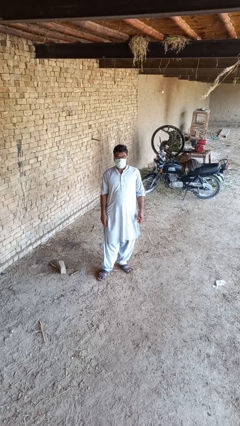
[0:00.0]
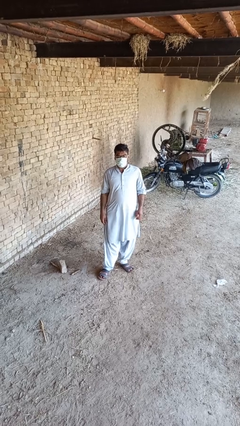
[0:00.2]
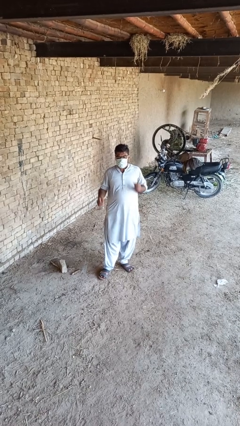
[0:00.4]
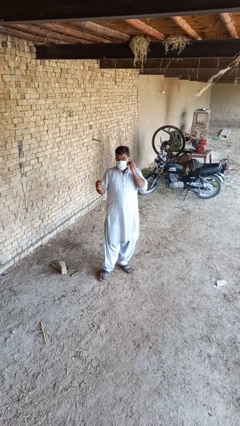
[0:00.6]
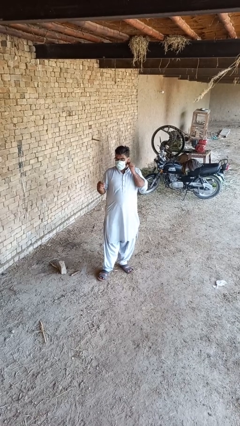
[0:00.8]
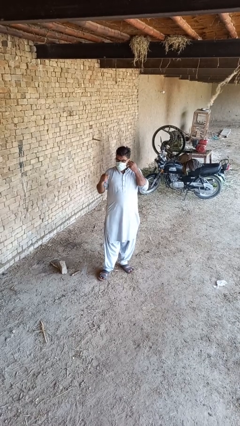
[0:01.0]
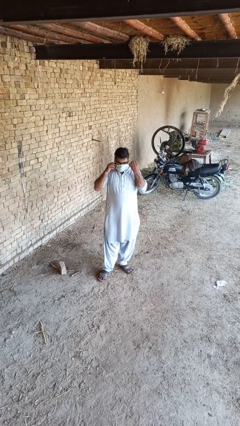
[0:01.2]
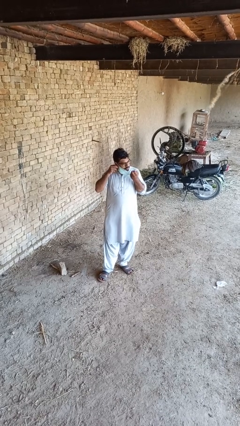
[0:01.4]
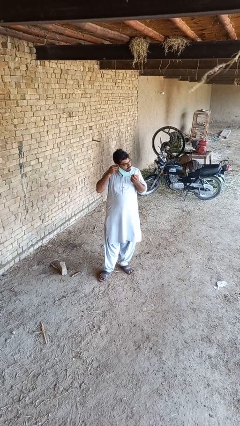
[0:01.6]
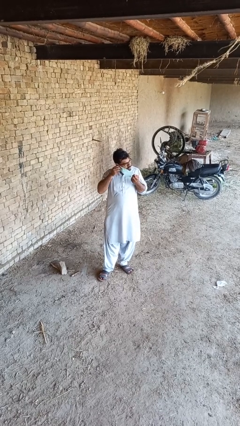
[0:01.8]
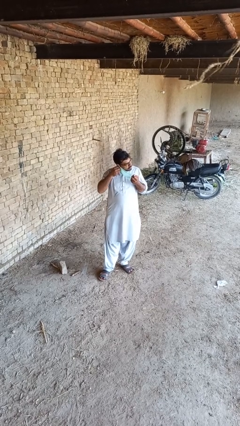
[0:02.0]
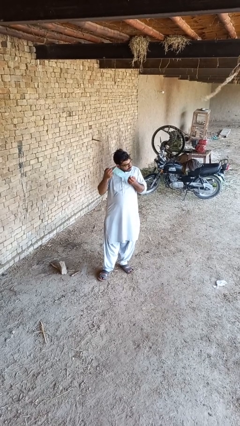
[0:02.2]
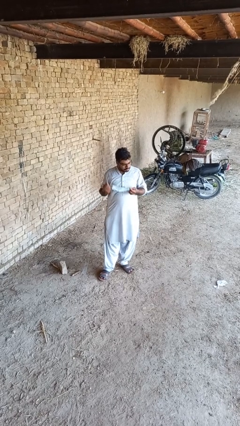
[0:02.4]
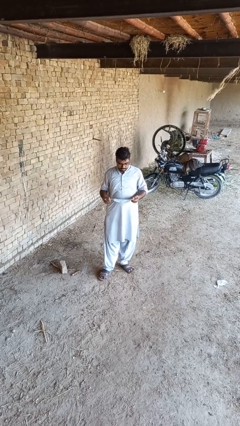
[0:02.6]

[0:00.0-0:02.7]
person takes off facemask

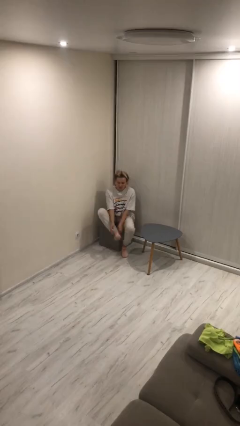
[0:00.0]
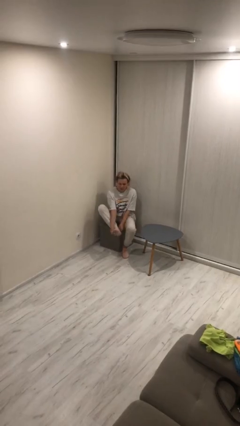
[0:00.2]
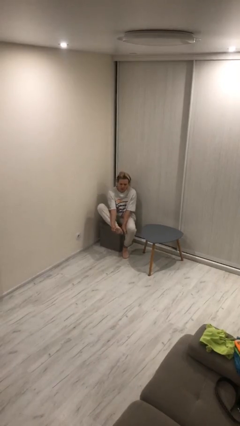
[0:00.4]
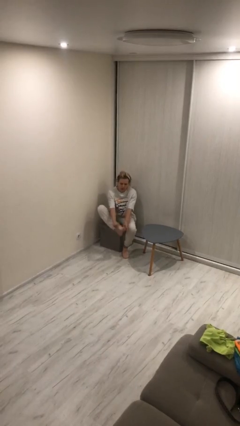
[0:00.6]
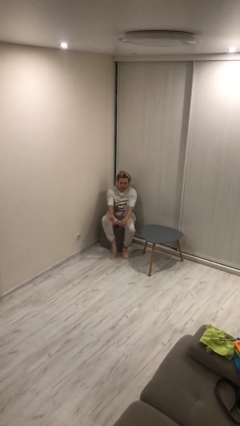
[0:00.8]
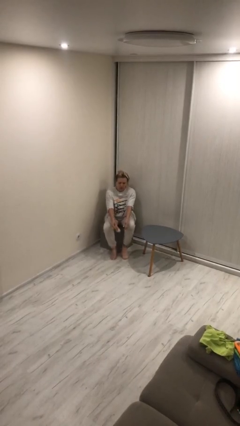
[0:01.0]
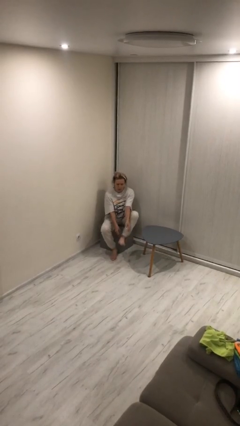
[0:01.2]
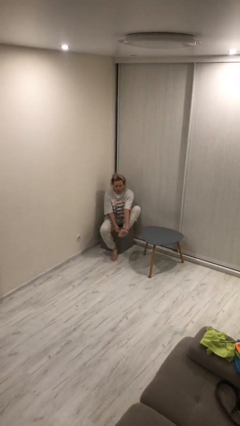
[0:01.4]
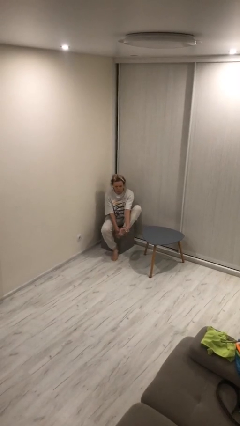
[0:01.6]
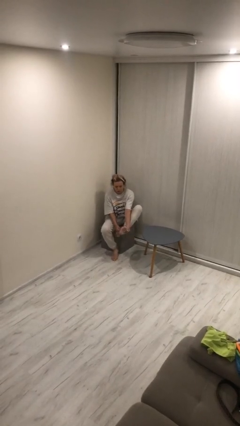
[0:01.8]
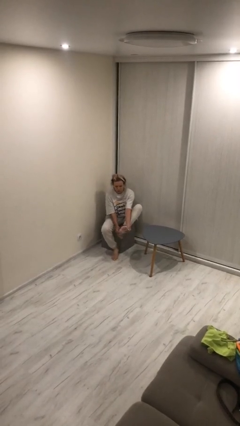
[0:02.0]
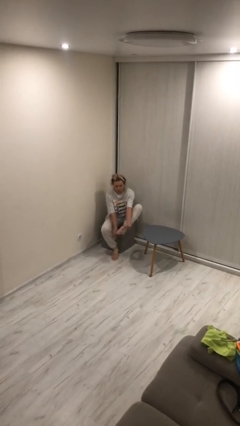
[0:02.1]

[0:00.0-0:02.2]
person takes off socks

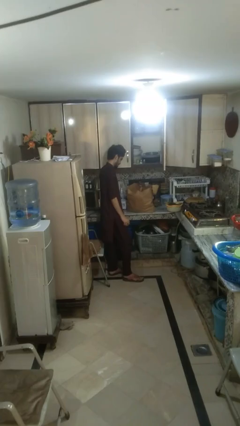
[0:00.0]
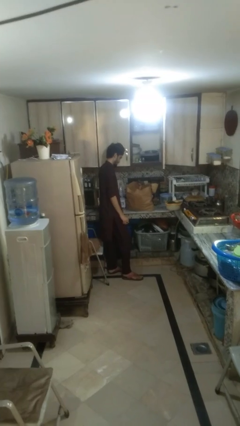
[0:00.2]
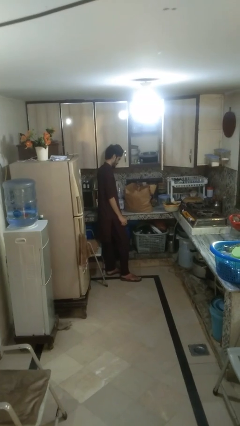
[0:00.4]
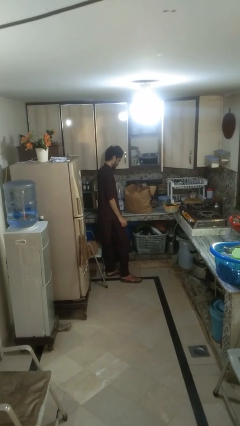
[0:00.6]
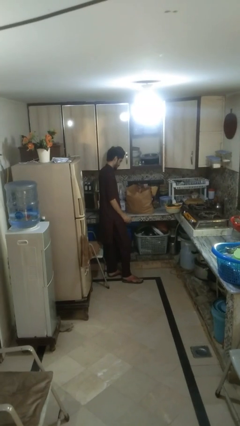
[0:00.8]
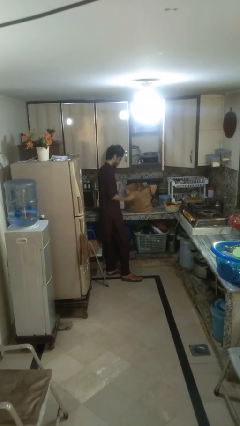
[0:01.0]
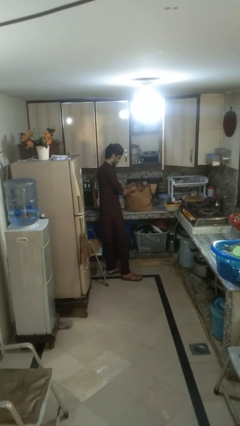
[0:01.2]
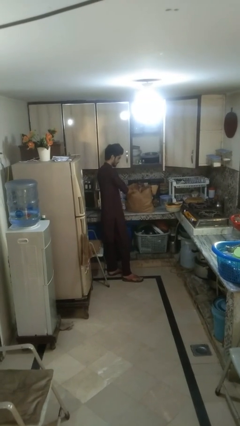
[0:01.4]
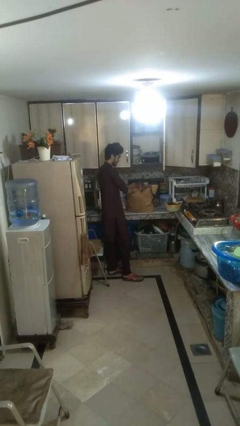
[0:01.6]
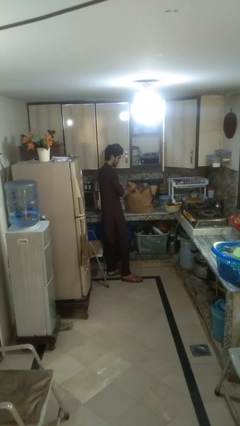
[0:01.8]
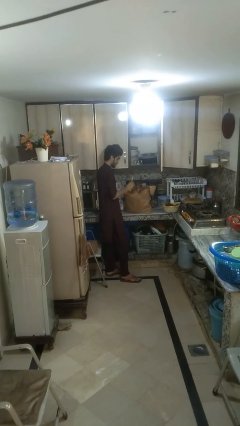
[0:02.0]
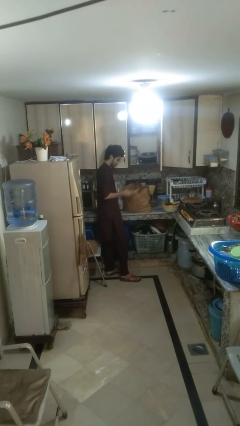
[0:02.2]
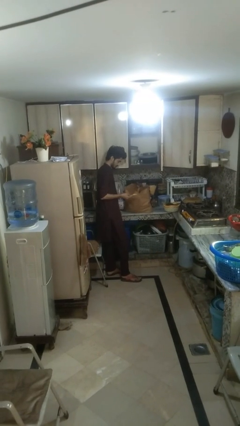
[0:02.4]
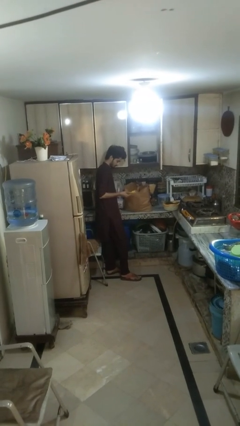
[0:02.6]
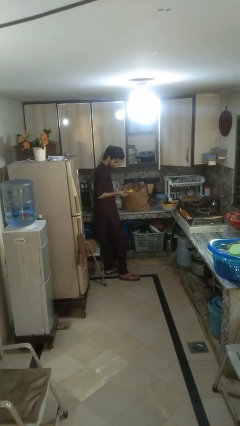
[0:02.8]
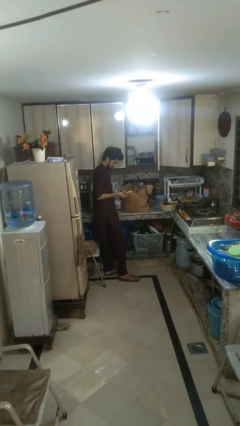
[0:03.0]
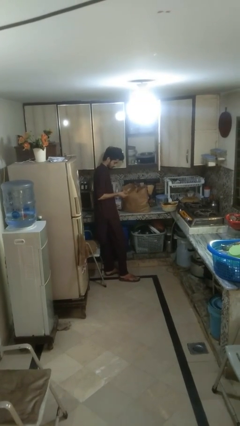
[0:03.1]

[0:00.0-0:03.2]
person takes object from bag

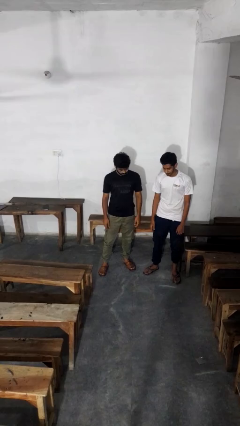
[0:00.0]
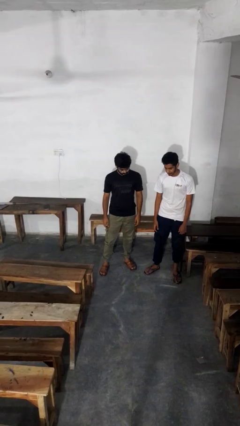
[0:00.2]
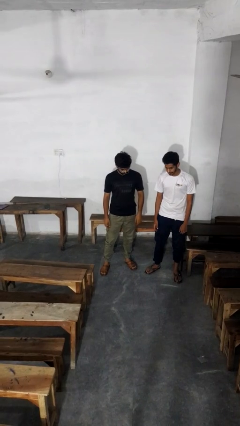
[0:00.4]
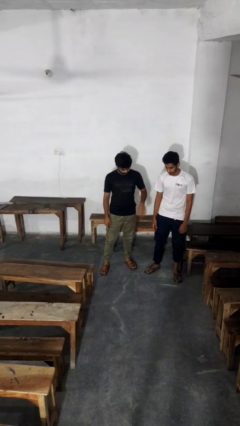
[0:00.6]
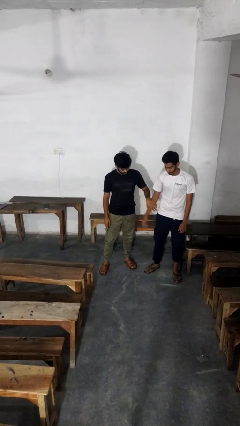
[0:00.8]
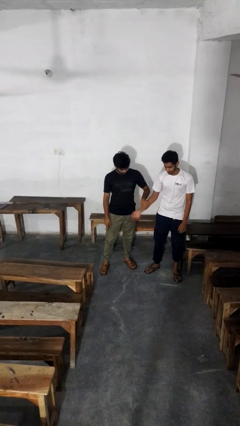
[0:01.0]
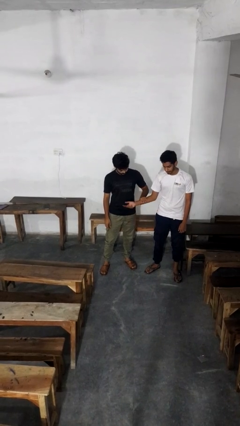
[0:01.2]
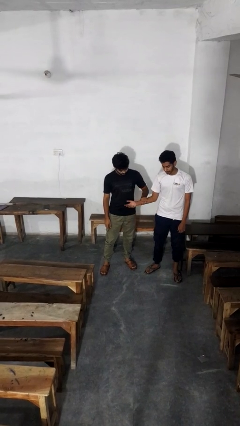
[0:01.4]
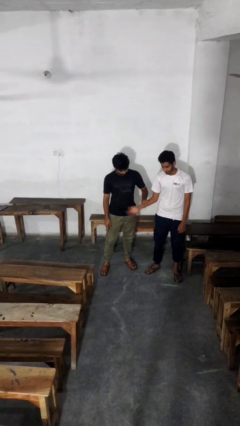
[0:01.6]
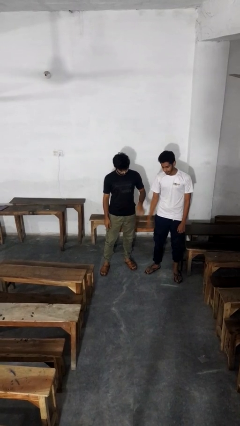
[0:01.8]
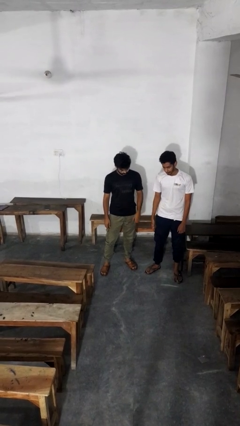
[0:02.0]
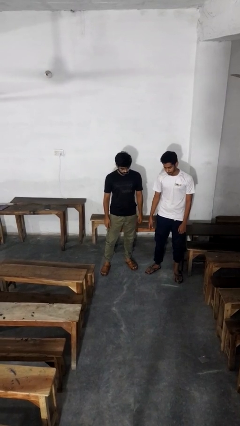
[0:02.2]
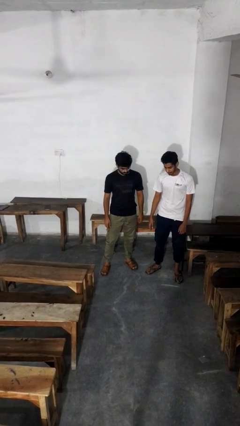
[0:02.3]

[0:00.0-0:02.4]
person grabs person by forearm

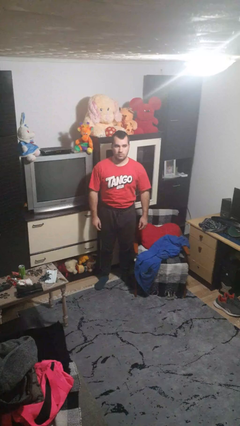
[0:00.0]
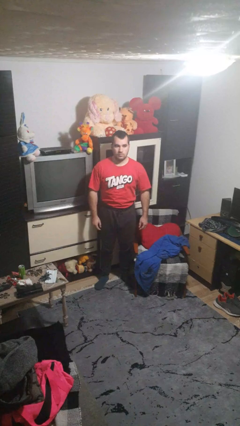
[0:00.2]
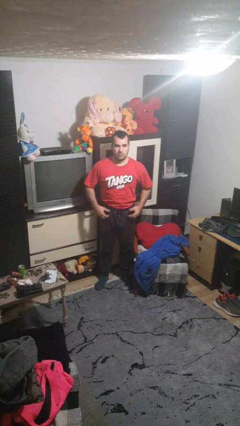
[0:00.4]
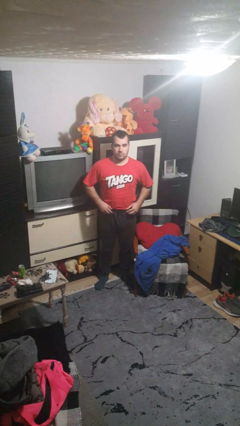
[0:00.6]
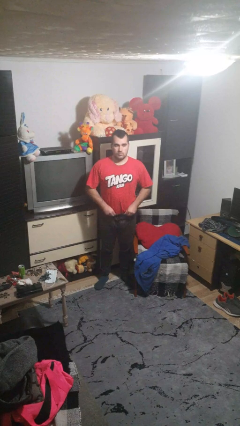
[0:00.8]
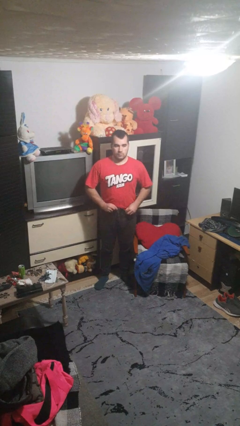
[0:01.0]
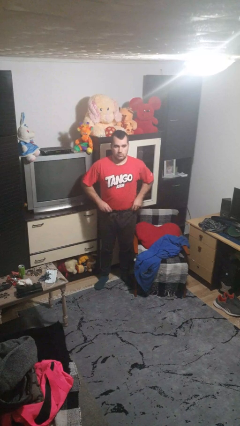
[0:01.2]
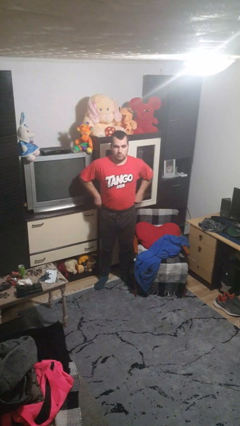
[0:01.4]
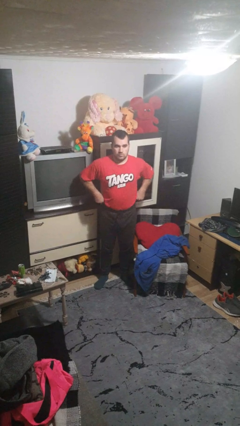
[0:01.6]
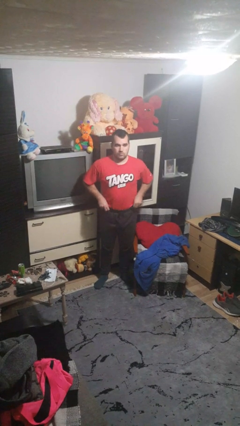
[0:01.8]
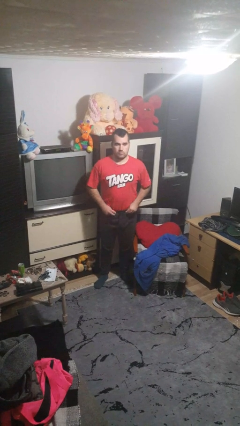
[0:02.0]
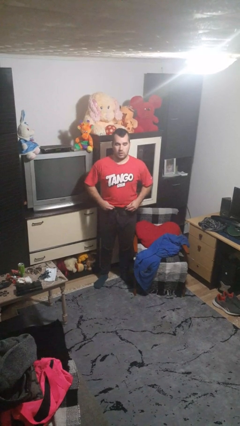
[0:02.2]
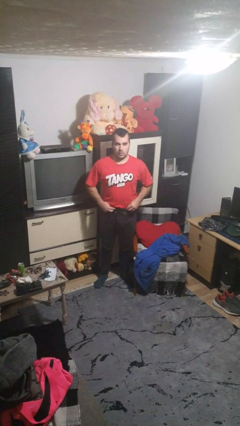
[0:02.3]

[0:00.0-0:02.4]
person hikes up pants

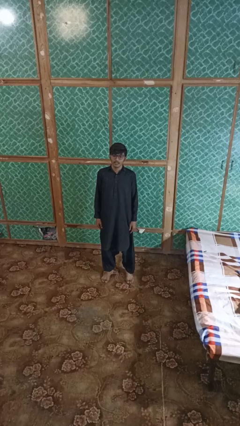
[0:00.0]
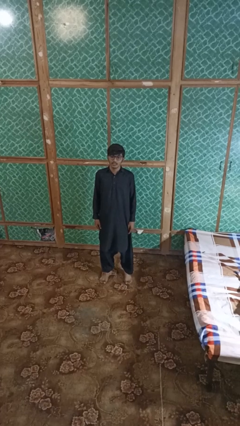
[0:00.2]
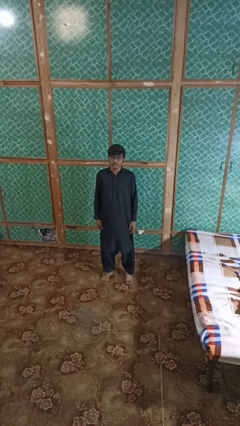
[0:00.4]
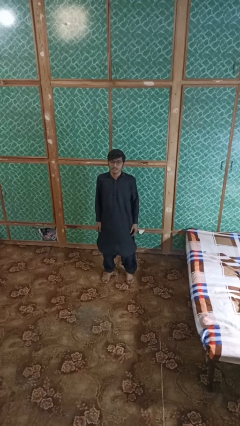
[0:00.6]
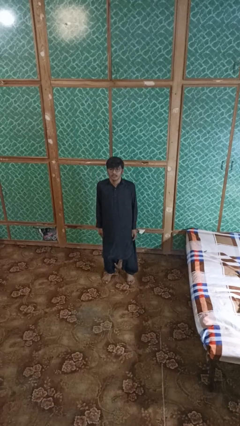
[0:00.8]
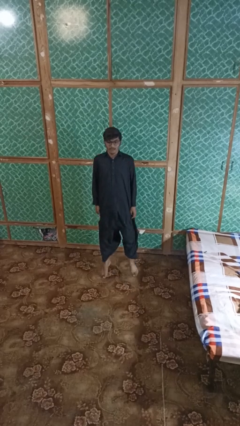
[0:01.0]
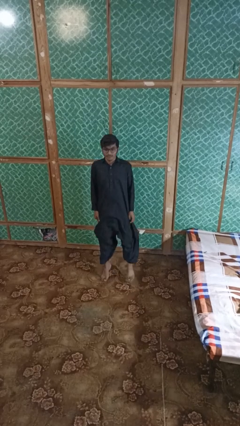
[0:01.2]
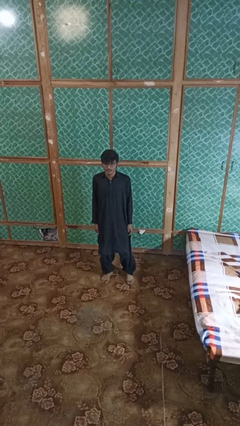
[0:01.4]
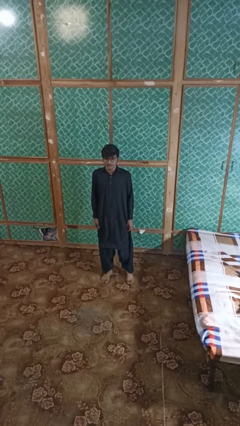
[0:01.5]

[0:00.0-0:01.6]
person jumps

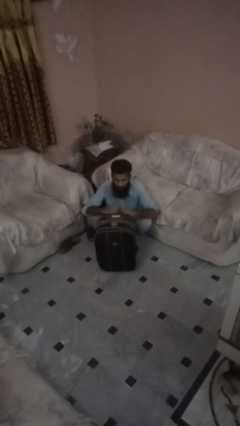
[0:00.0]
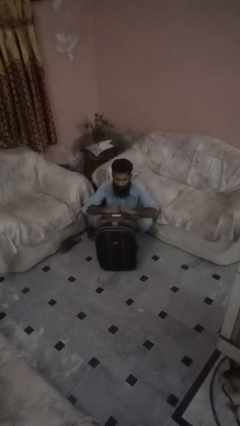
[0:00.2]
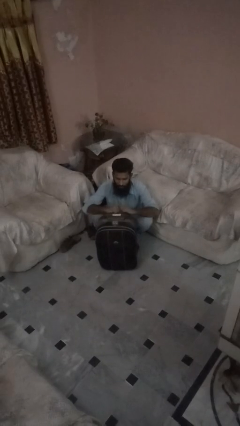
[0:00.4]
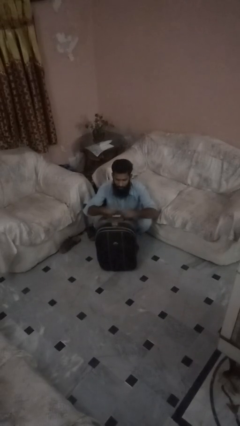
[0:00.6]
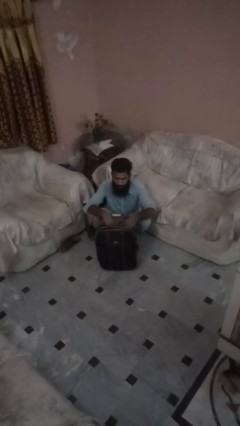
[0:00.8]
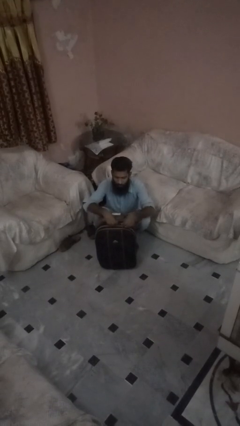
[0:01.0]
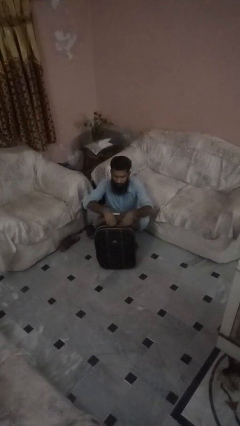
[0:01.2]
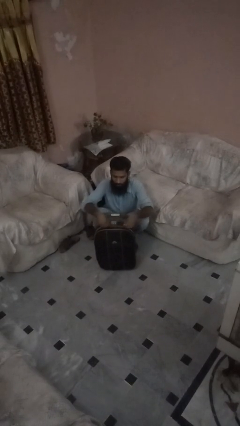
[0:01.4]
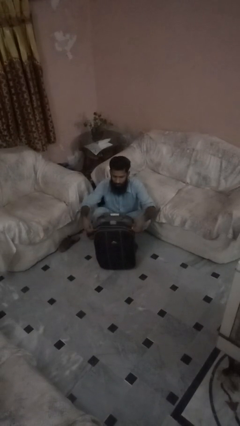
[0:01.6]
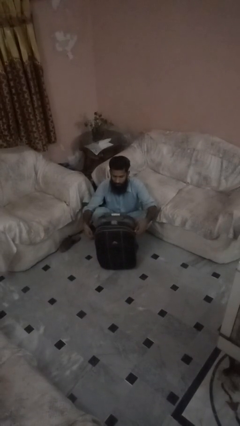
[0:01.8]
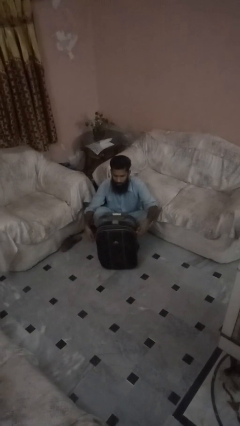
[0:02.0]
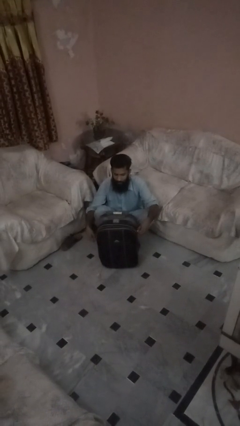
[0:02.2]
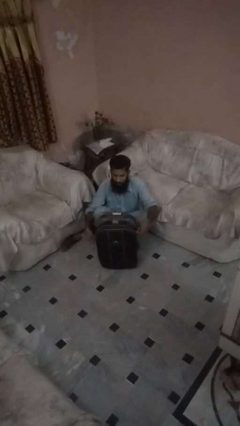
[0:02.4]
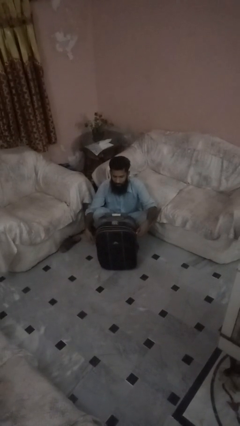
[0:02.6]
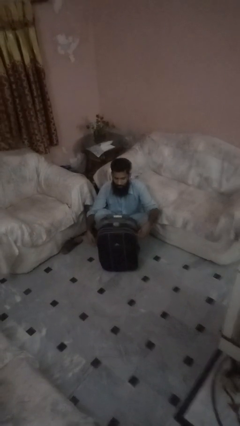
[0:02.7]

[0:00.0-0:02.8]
person opens suitcase
